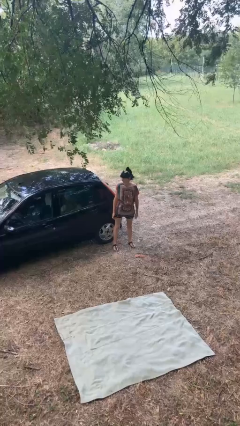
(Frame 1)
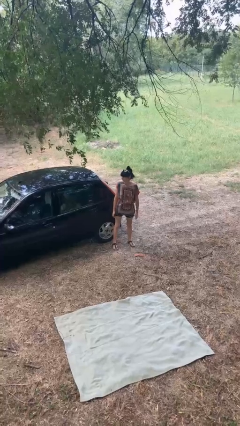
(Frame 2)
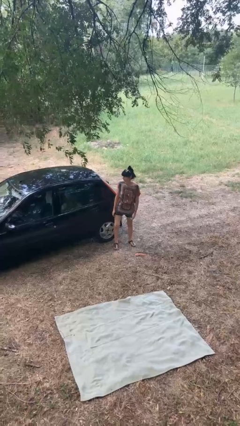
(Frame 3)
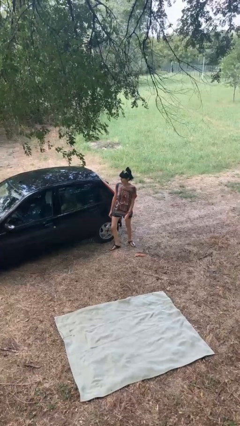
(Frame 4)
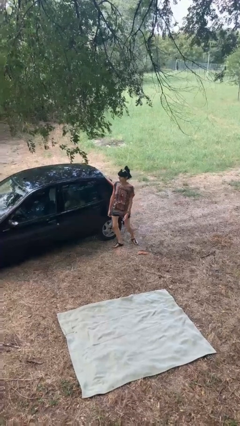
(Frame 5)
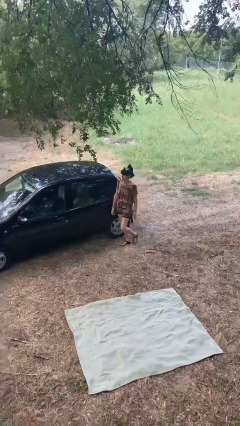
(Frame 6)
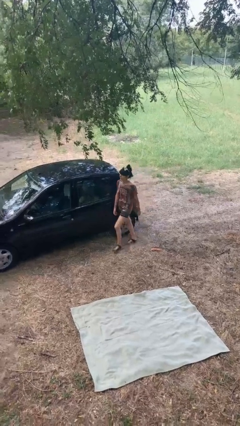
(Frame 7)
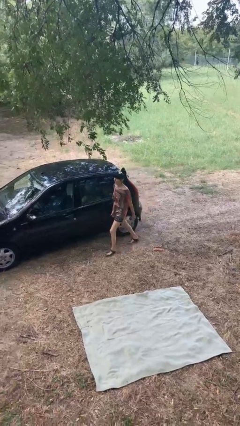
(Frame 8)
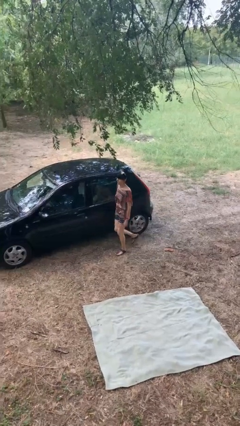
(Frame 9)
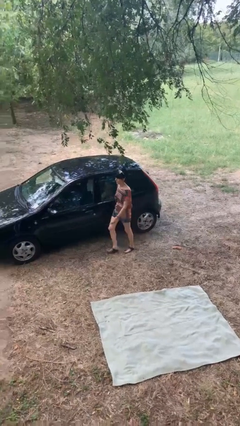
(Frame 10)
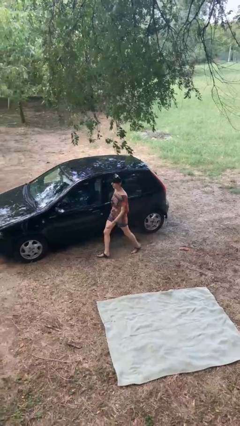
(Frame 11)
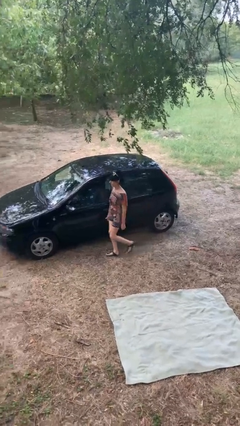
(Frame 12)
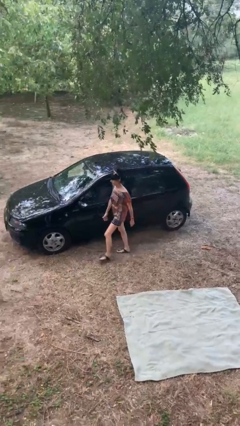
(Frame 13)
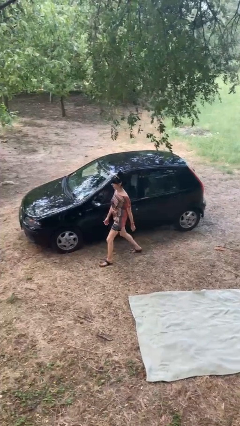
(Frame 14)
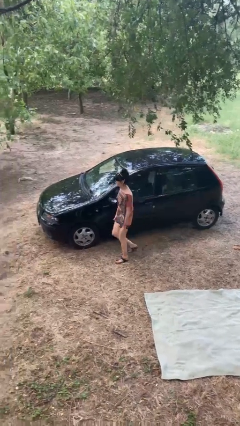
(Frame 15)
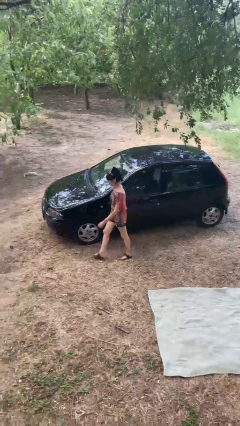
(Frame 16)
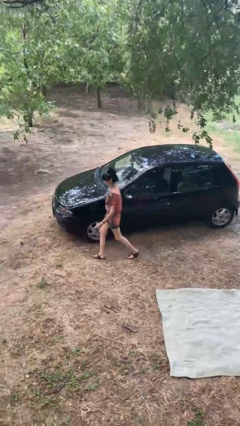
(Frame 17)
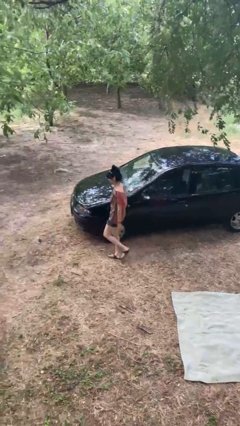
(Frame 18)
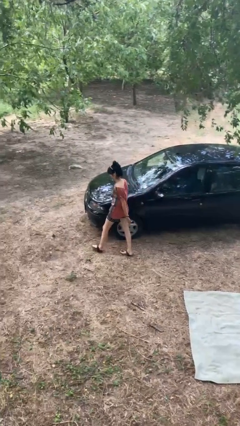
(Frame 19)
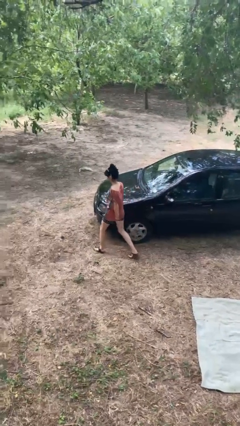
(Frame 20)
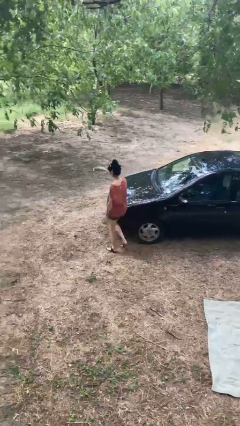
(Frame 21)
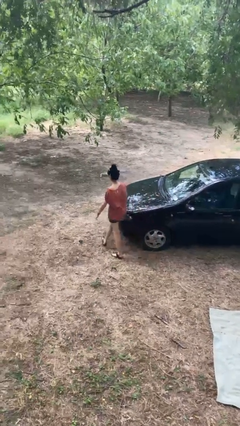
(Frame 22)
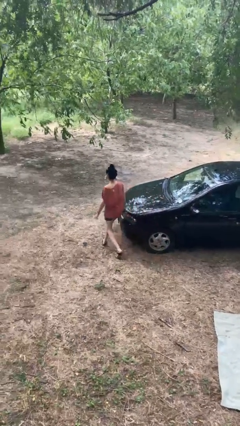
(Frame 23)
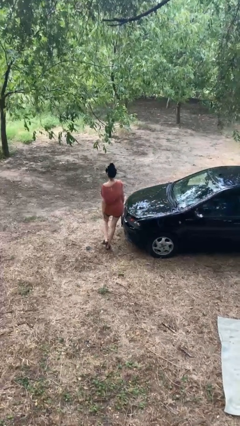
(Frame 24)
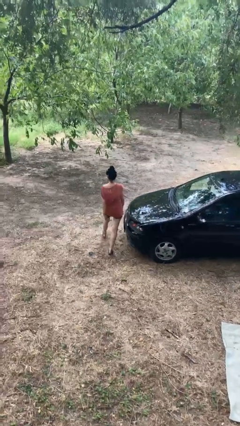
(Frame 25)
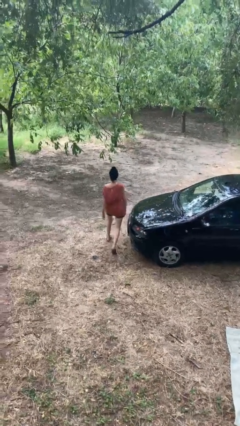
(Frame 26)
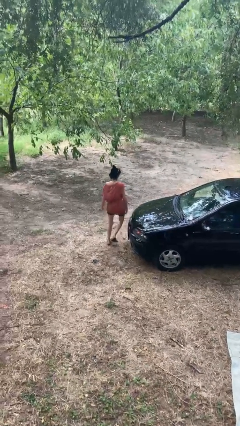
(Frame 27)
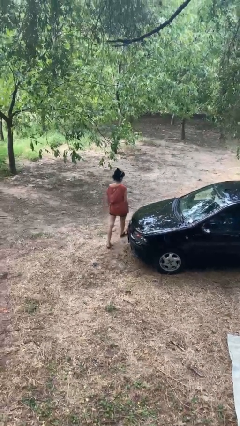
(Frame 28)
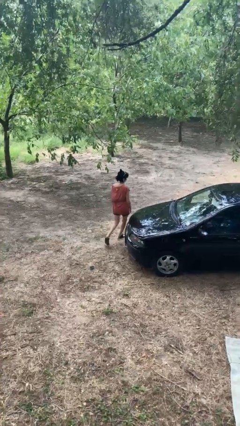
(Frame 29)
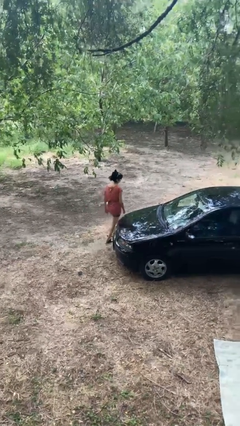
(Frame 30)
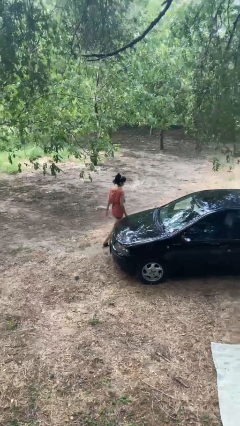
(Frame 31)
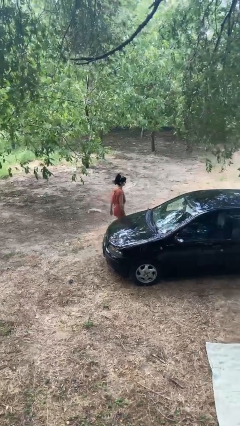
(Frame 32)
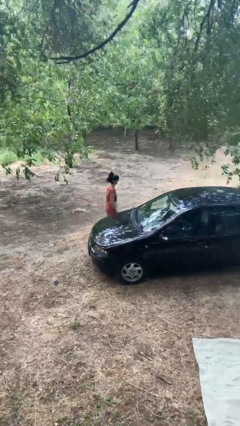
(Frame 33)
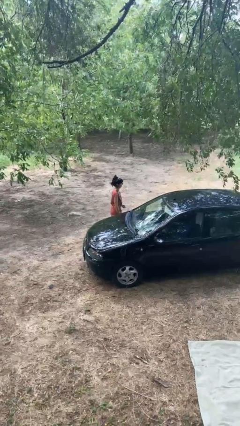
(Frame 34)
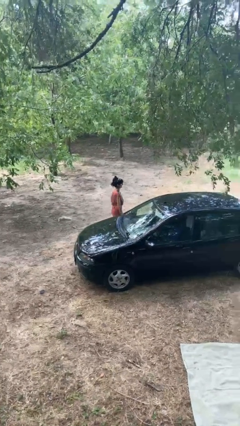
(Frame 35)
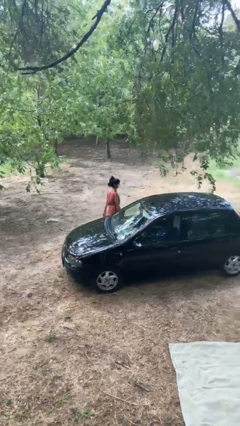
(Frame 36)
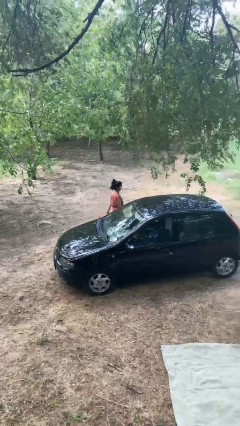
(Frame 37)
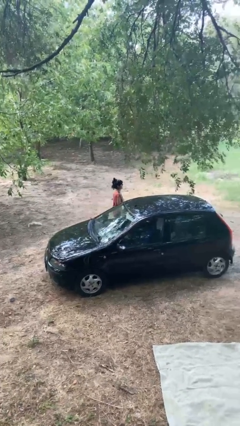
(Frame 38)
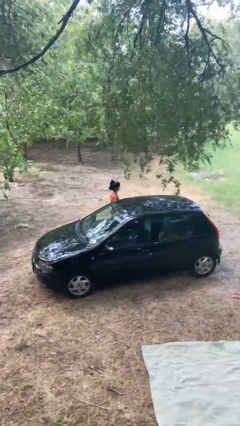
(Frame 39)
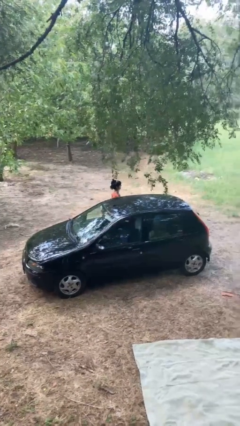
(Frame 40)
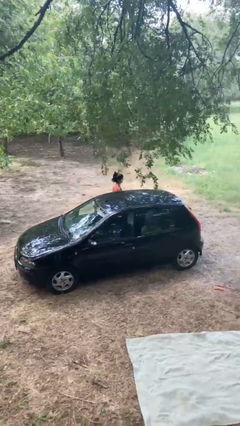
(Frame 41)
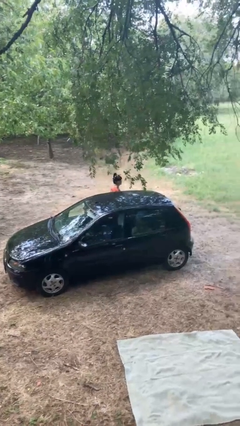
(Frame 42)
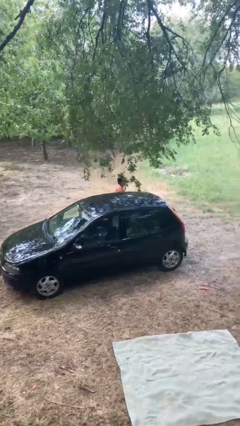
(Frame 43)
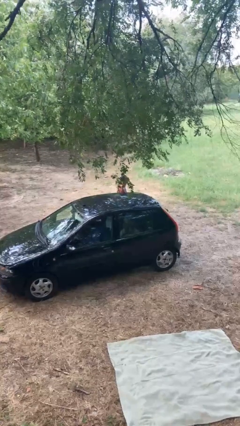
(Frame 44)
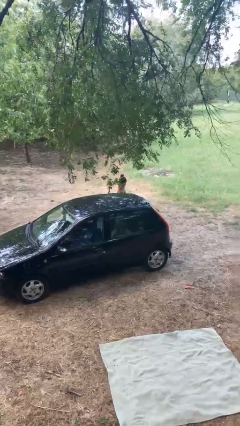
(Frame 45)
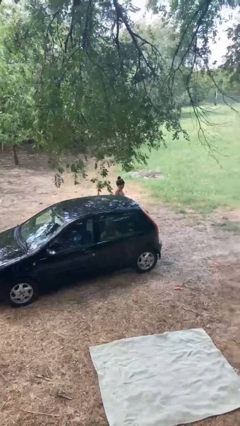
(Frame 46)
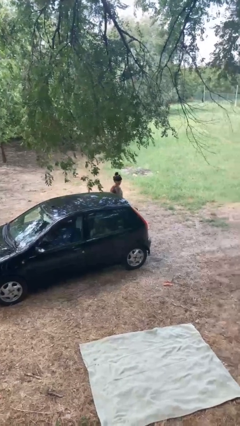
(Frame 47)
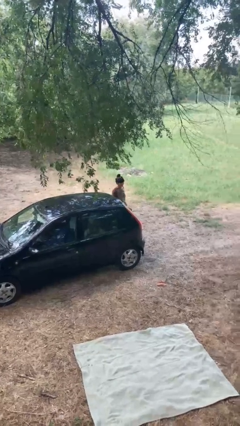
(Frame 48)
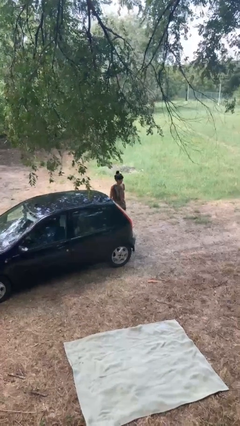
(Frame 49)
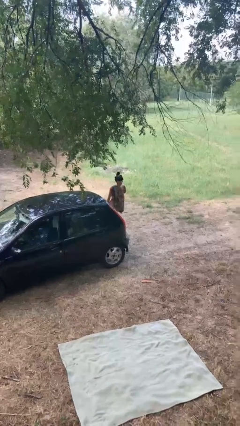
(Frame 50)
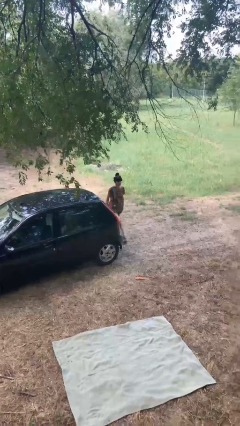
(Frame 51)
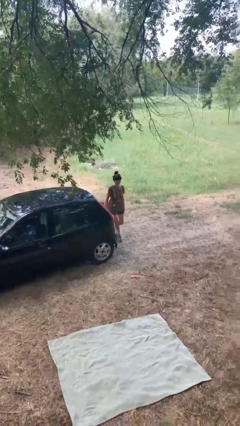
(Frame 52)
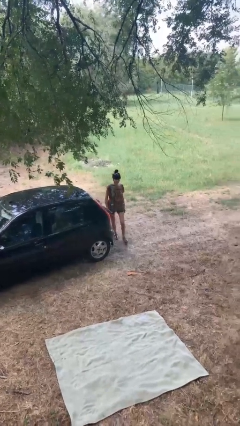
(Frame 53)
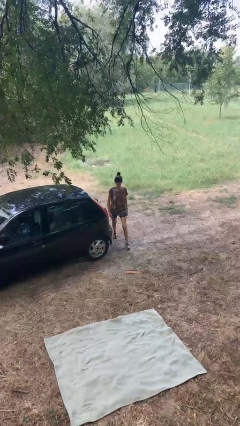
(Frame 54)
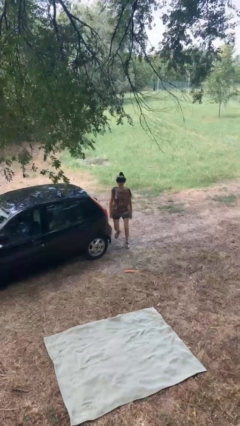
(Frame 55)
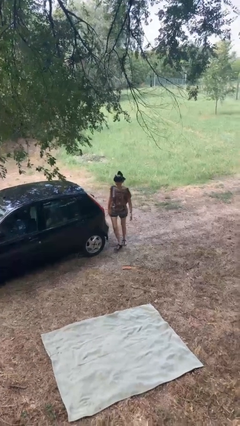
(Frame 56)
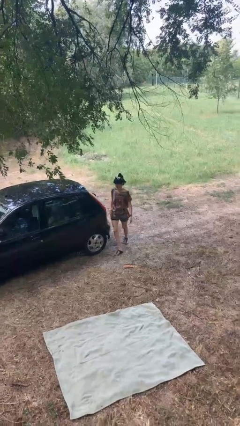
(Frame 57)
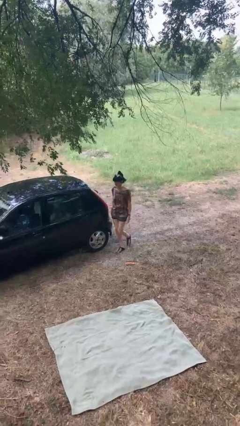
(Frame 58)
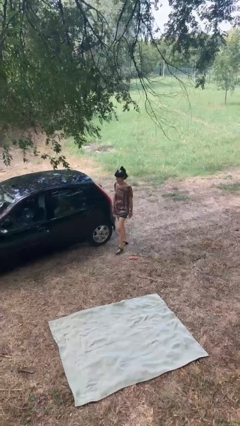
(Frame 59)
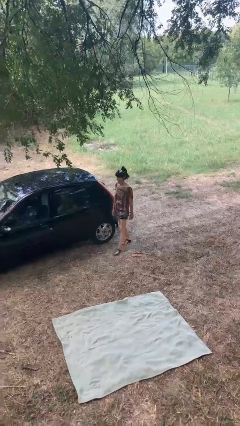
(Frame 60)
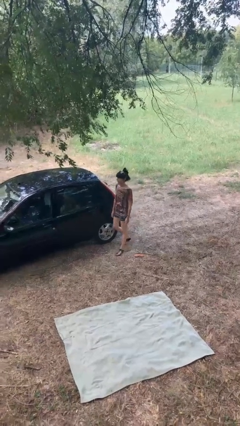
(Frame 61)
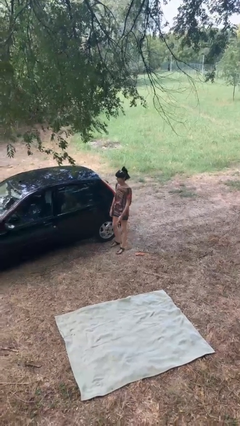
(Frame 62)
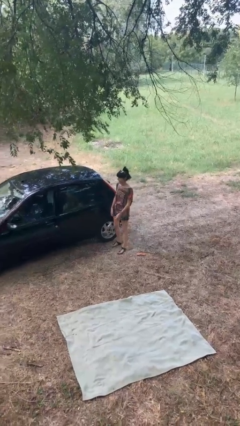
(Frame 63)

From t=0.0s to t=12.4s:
person walks around car

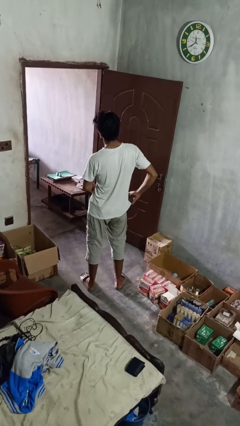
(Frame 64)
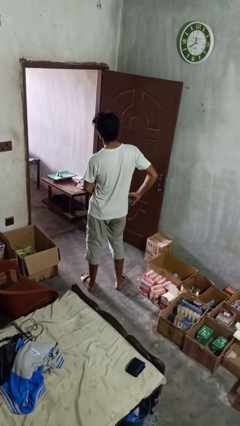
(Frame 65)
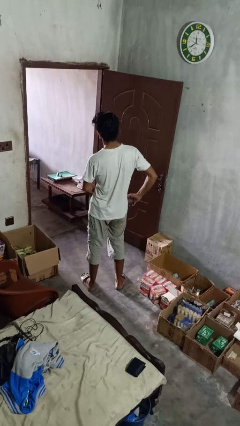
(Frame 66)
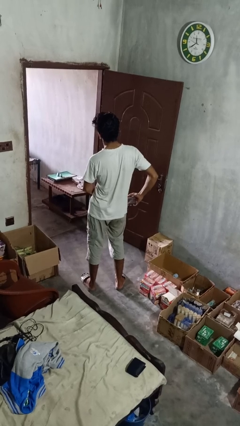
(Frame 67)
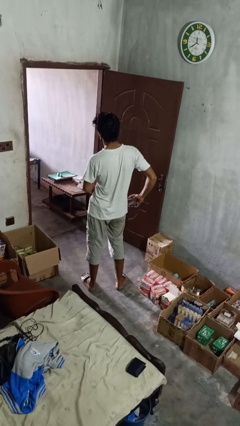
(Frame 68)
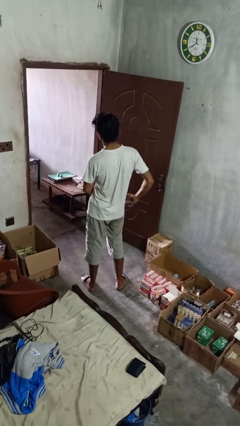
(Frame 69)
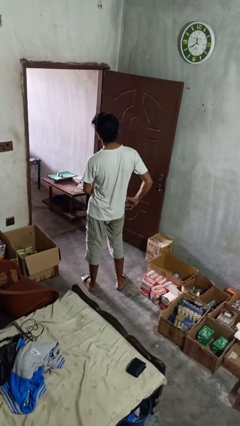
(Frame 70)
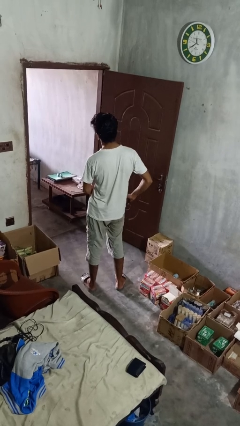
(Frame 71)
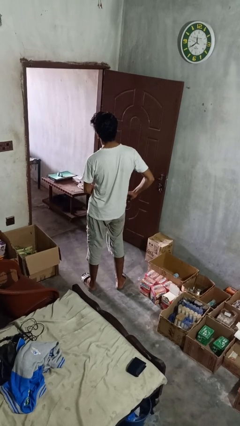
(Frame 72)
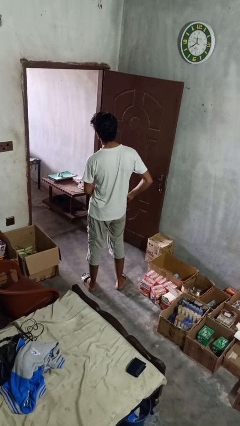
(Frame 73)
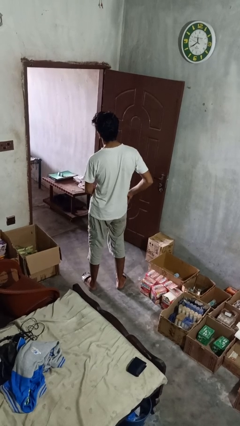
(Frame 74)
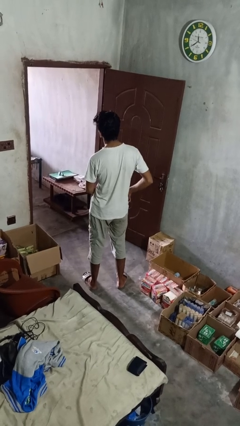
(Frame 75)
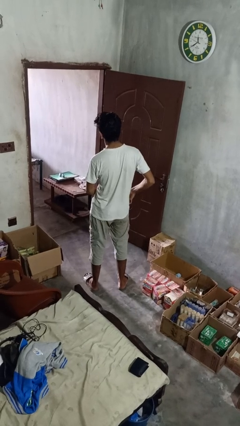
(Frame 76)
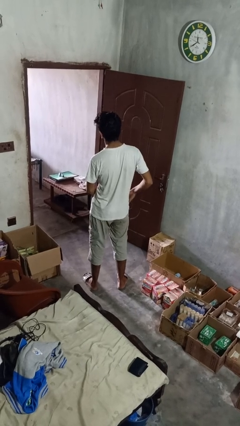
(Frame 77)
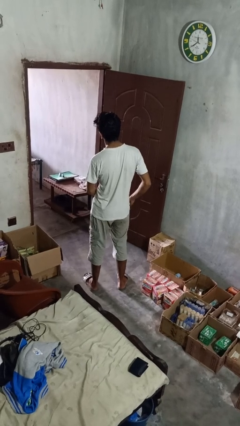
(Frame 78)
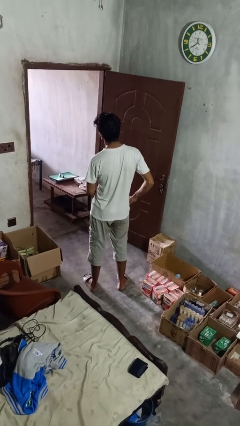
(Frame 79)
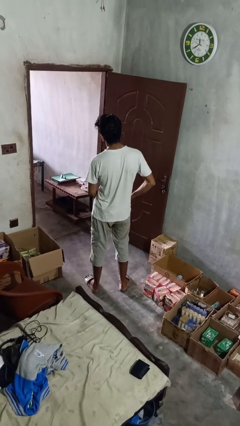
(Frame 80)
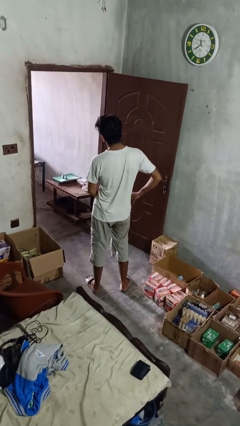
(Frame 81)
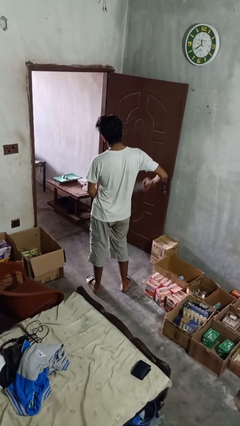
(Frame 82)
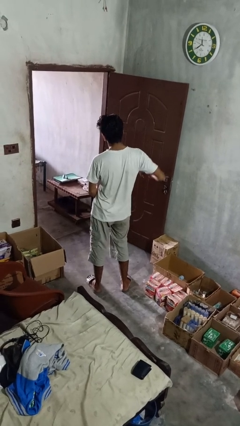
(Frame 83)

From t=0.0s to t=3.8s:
person puts phone into pocket

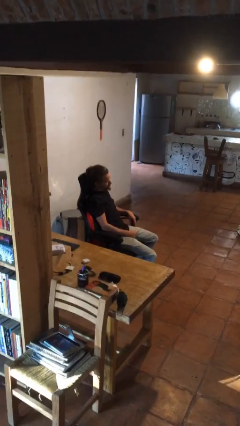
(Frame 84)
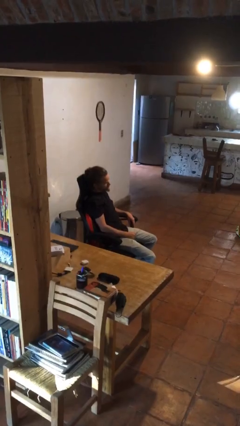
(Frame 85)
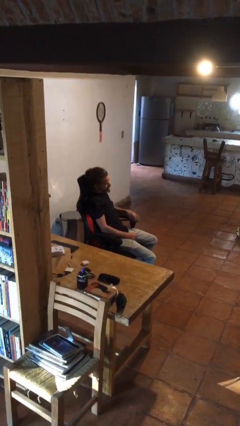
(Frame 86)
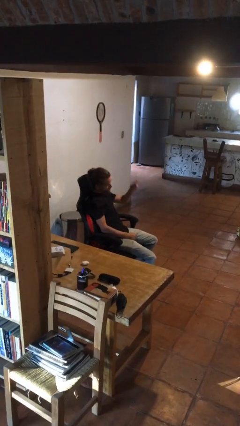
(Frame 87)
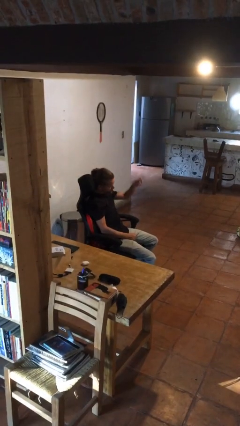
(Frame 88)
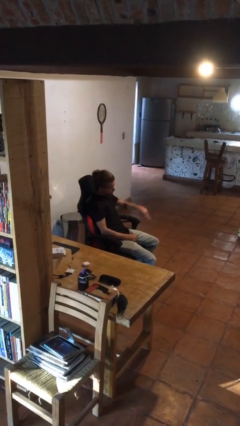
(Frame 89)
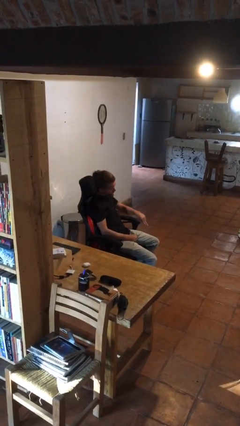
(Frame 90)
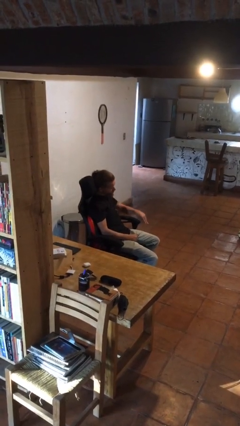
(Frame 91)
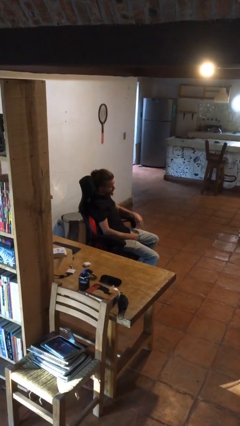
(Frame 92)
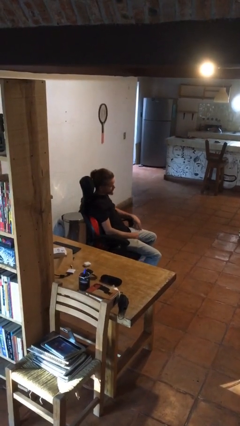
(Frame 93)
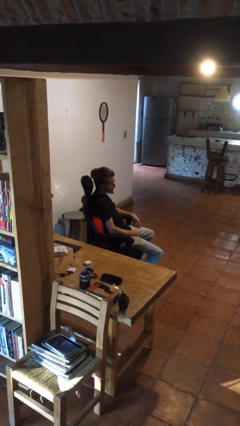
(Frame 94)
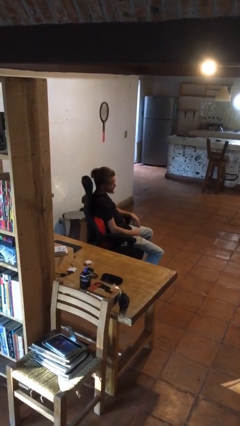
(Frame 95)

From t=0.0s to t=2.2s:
person gestures swipe down
